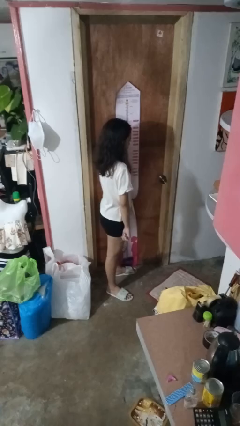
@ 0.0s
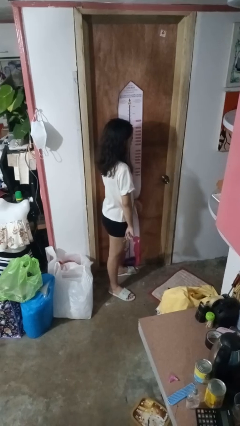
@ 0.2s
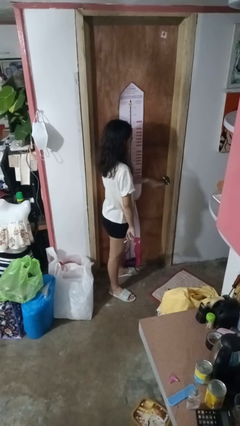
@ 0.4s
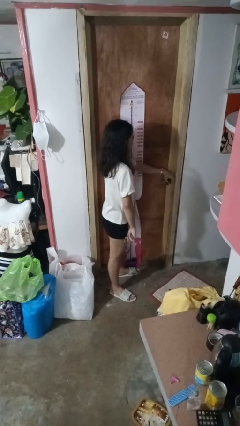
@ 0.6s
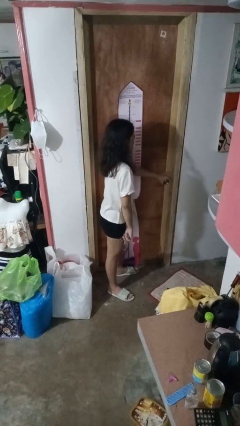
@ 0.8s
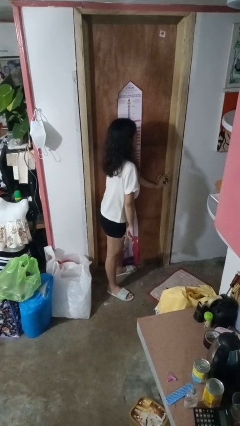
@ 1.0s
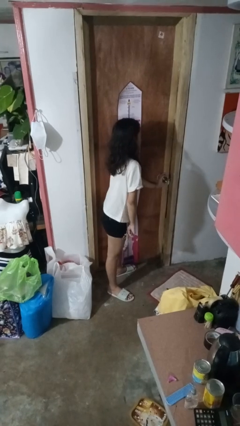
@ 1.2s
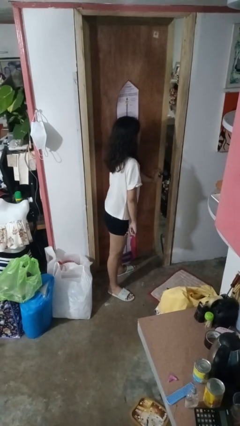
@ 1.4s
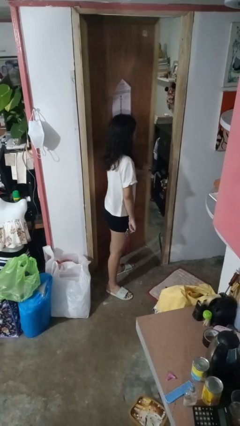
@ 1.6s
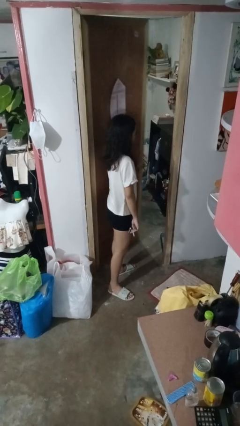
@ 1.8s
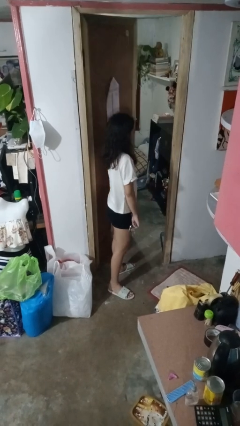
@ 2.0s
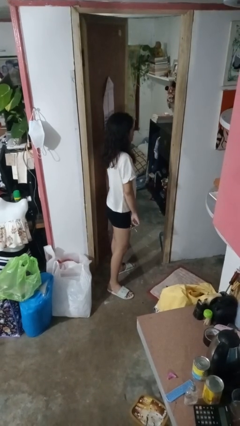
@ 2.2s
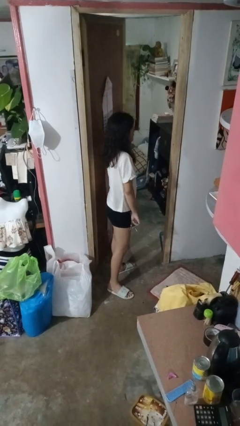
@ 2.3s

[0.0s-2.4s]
person opens facility door

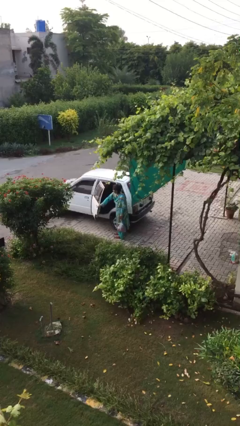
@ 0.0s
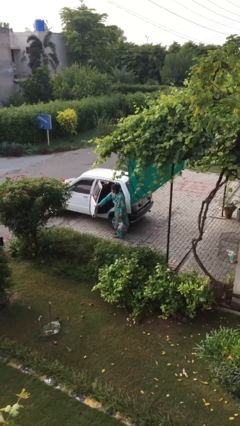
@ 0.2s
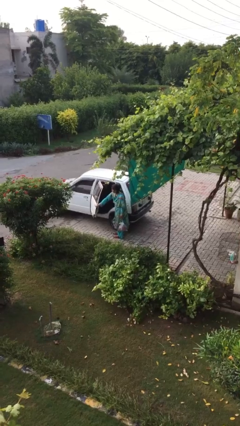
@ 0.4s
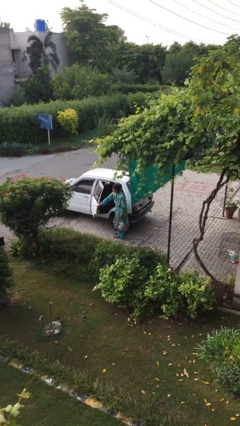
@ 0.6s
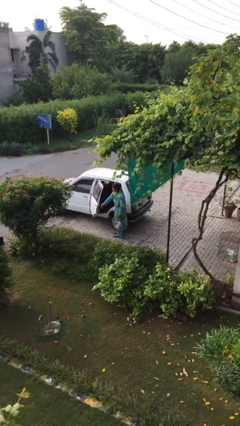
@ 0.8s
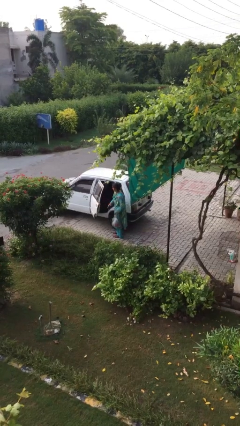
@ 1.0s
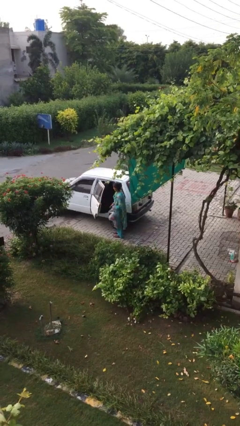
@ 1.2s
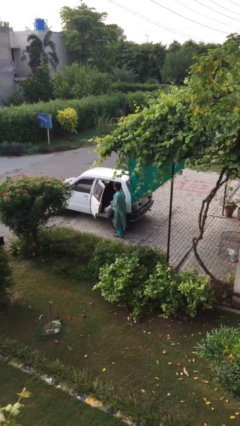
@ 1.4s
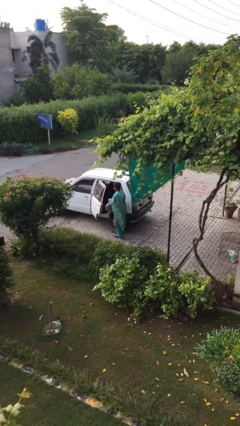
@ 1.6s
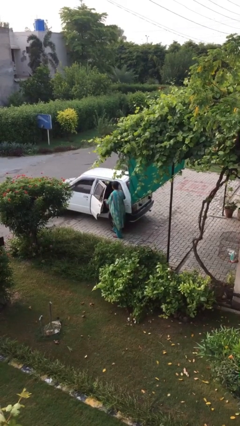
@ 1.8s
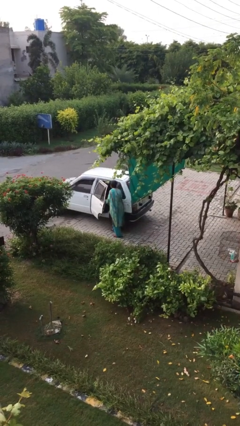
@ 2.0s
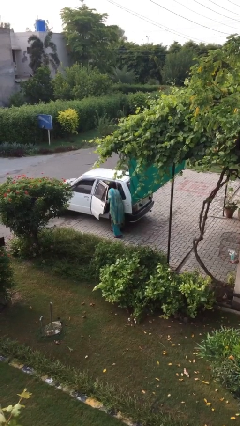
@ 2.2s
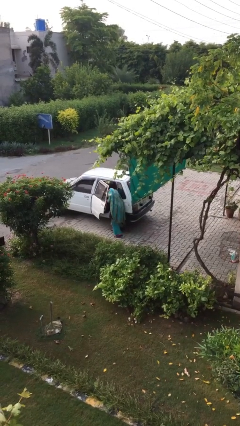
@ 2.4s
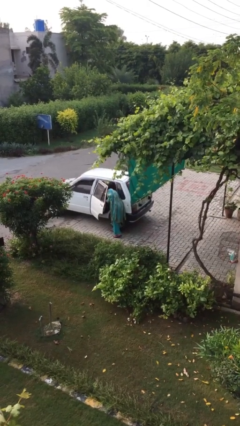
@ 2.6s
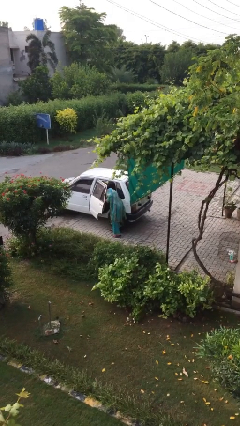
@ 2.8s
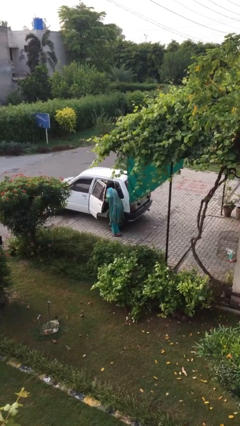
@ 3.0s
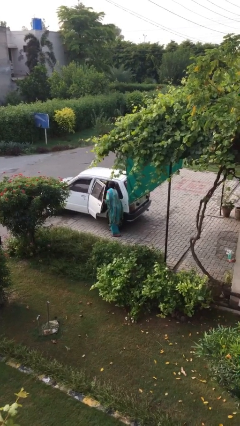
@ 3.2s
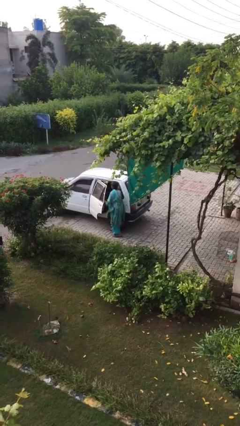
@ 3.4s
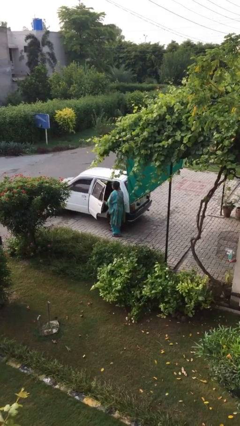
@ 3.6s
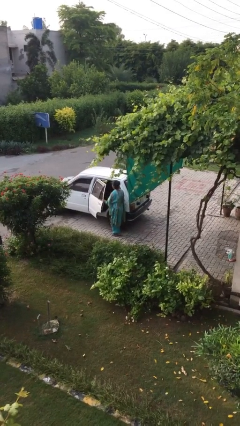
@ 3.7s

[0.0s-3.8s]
person loads car

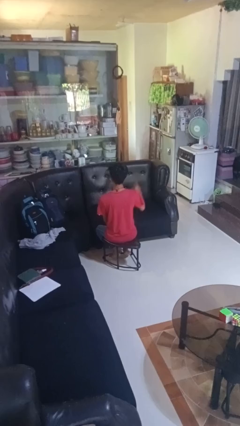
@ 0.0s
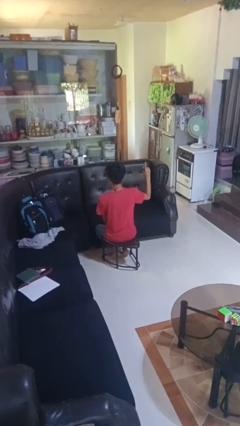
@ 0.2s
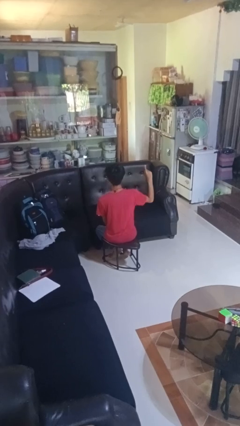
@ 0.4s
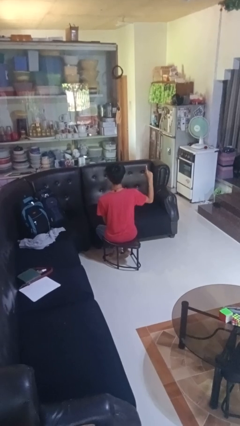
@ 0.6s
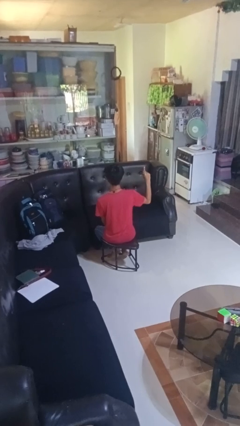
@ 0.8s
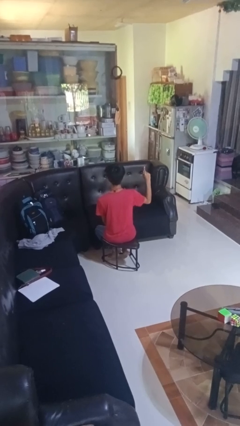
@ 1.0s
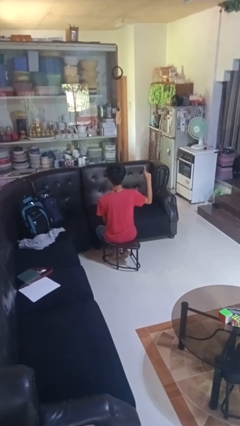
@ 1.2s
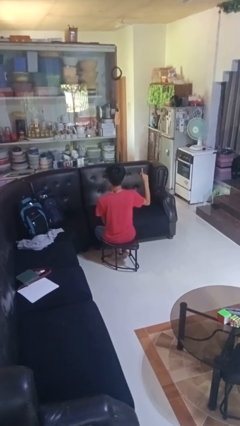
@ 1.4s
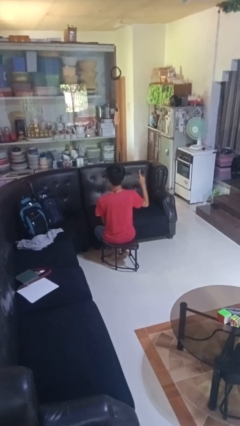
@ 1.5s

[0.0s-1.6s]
person gestures number one

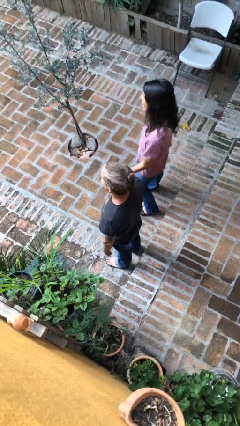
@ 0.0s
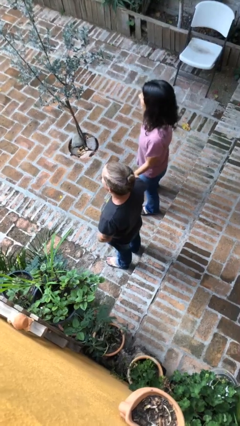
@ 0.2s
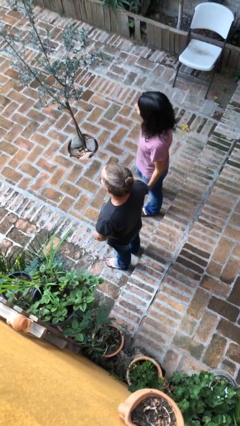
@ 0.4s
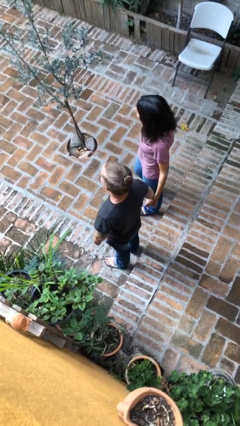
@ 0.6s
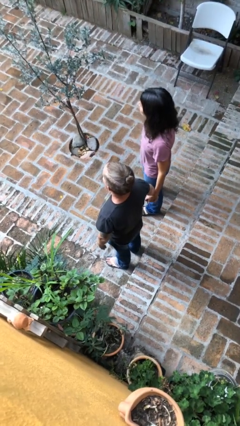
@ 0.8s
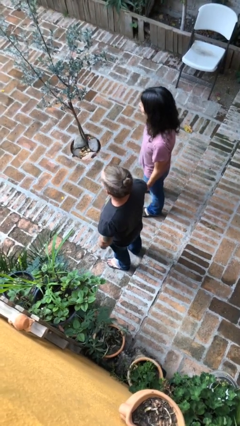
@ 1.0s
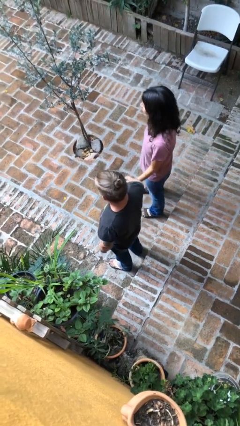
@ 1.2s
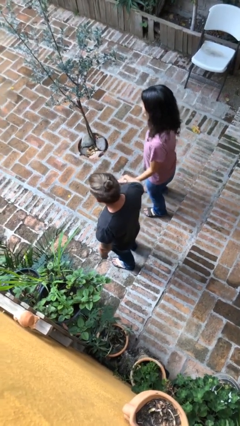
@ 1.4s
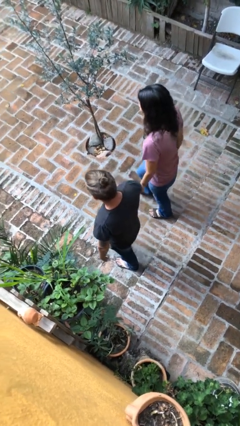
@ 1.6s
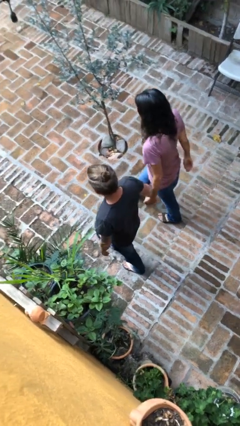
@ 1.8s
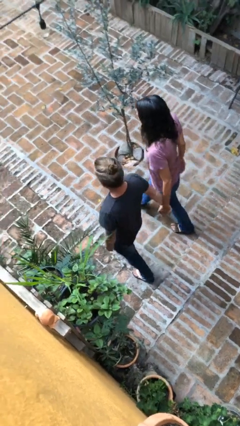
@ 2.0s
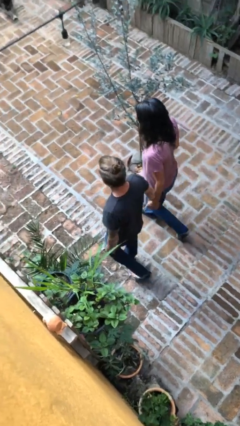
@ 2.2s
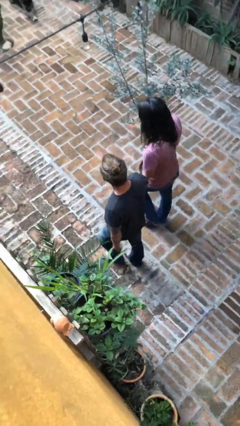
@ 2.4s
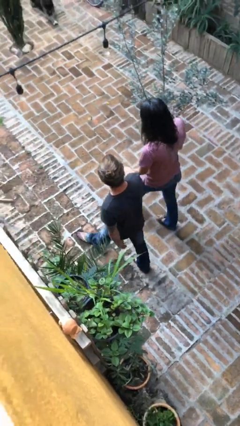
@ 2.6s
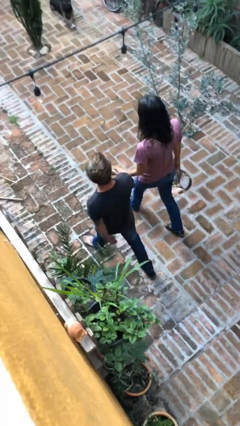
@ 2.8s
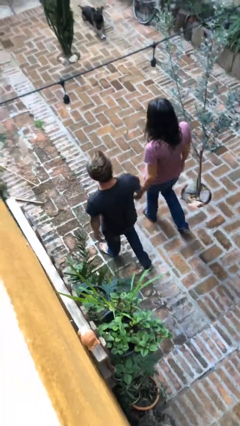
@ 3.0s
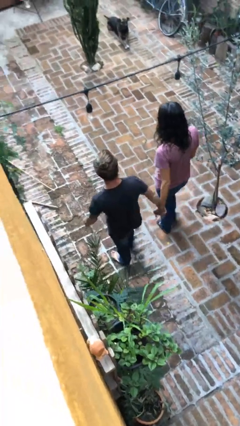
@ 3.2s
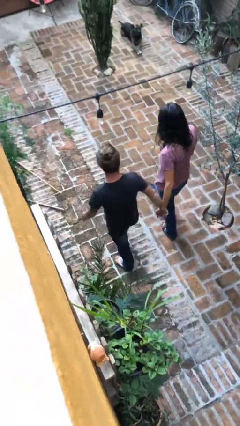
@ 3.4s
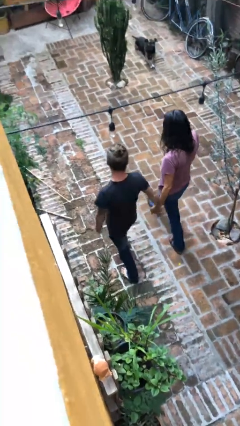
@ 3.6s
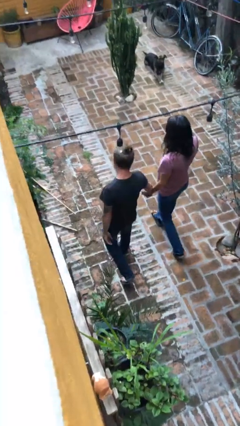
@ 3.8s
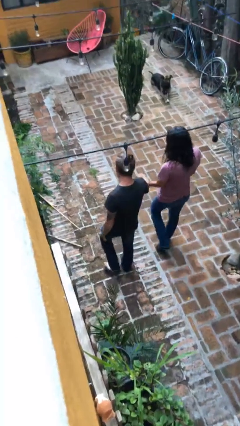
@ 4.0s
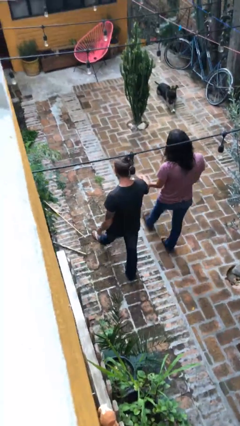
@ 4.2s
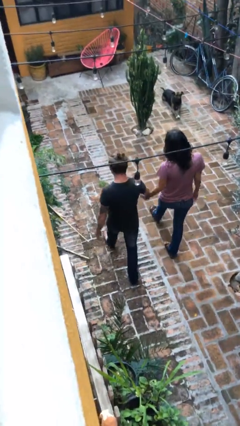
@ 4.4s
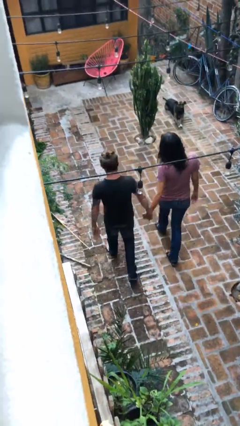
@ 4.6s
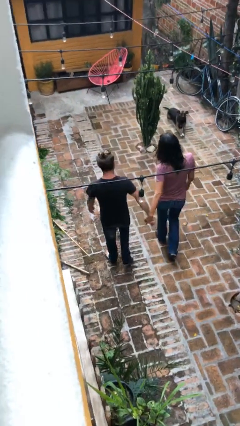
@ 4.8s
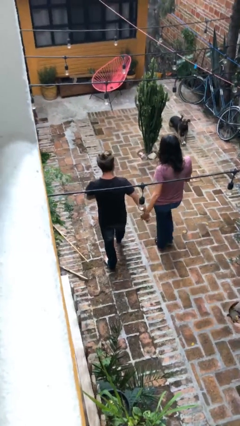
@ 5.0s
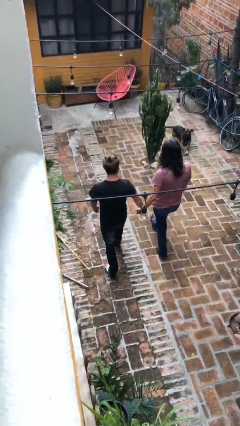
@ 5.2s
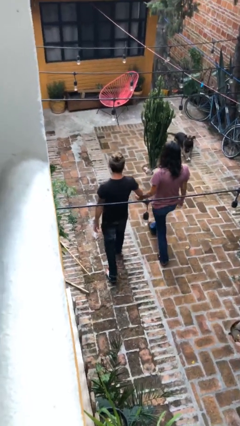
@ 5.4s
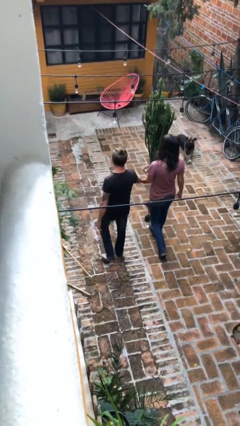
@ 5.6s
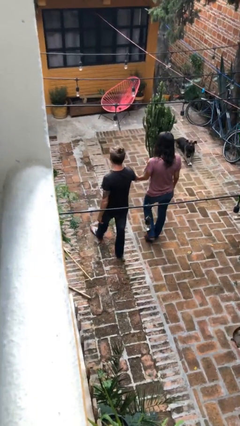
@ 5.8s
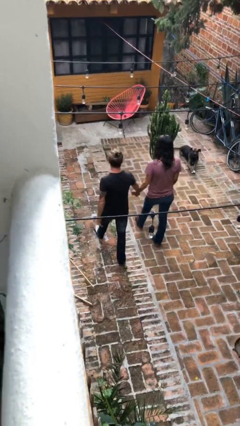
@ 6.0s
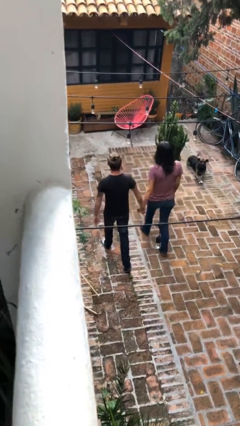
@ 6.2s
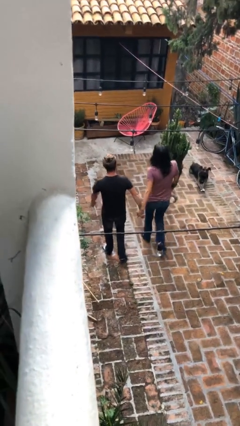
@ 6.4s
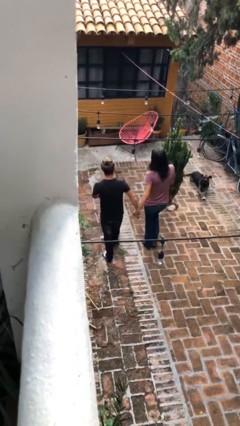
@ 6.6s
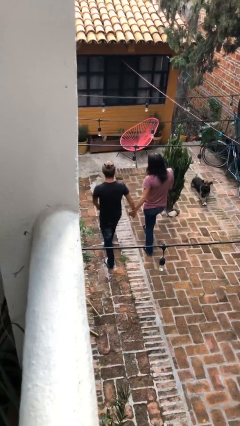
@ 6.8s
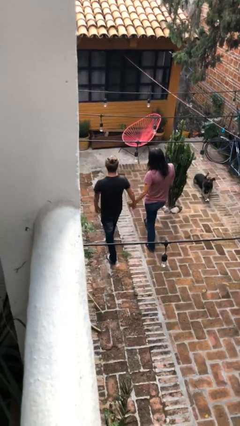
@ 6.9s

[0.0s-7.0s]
person holds hand

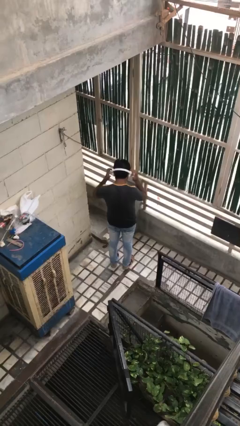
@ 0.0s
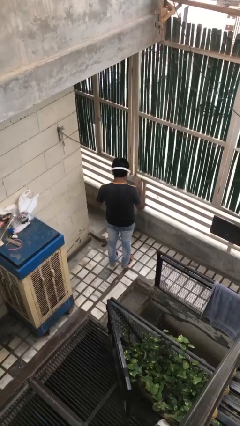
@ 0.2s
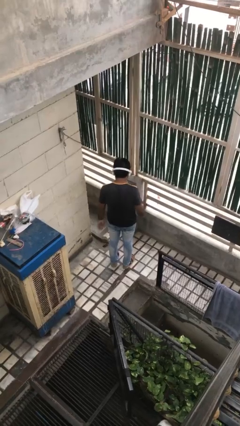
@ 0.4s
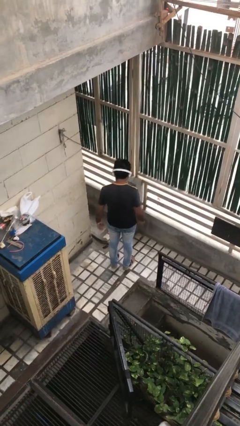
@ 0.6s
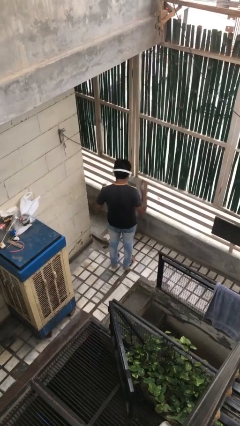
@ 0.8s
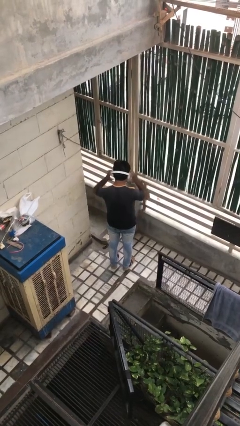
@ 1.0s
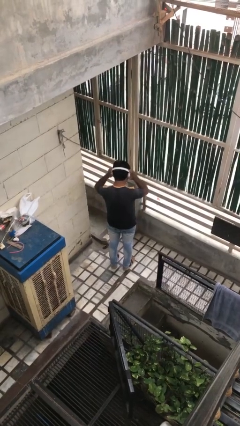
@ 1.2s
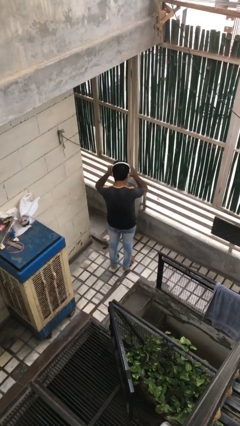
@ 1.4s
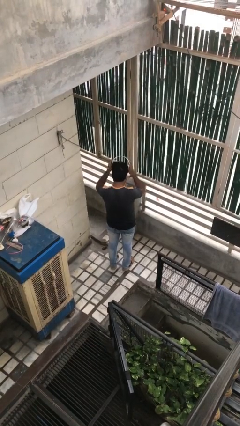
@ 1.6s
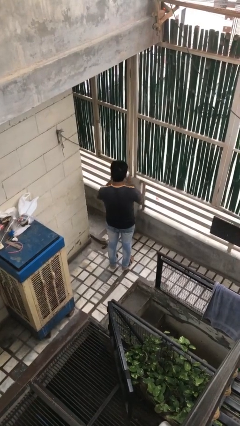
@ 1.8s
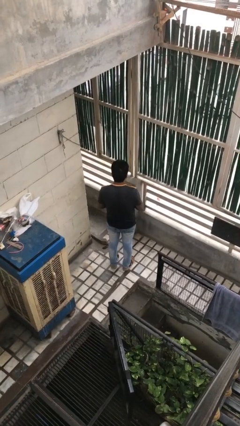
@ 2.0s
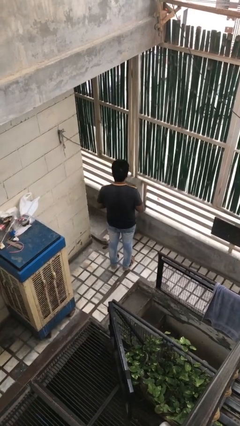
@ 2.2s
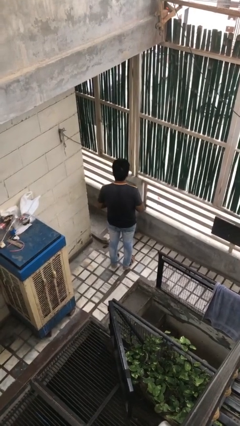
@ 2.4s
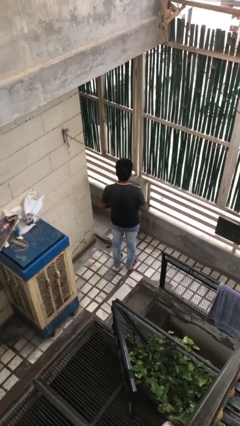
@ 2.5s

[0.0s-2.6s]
person takes off headphones
